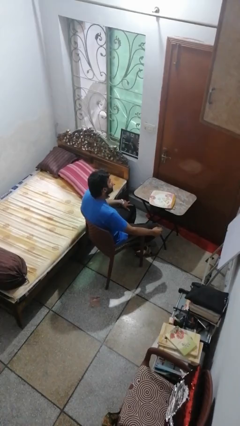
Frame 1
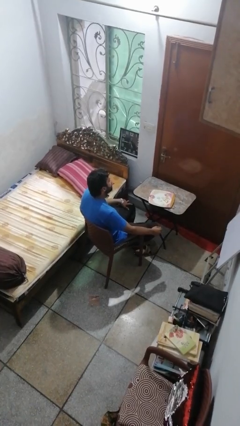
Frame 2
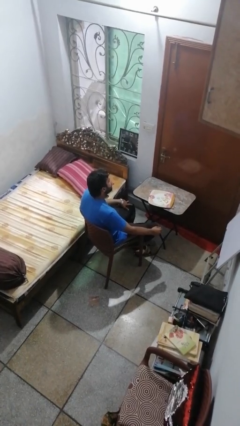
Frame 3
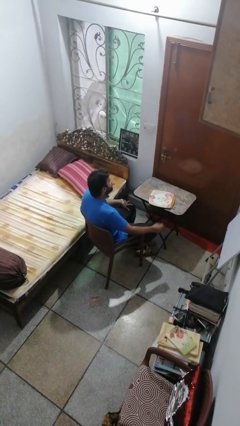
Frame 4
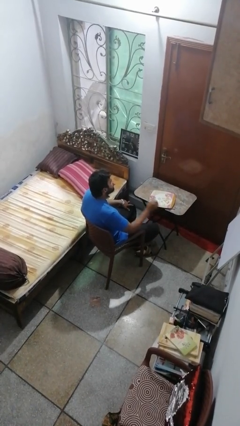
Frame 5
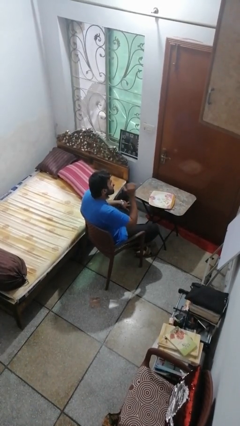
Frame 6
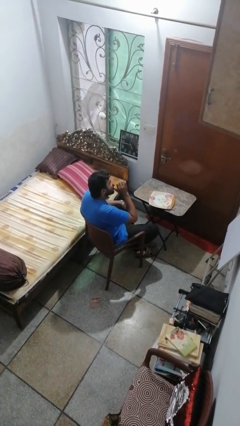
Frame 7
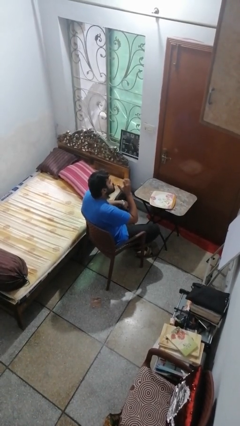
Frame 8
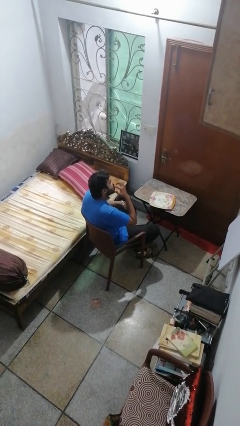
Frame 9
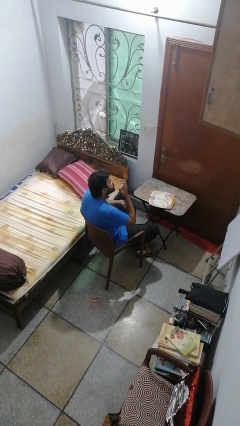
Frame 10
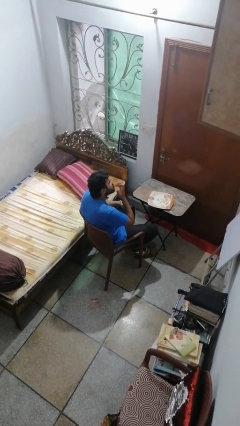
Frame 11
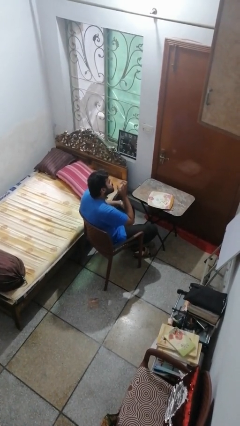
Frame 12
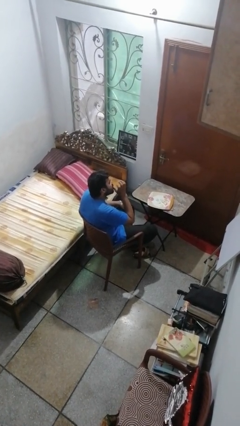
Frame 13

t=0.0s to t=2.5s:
person licks fingers

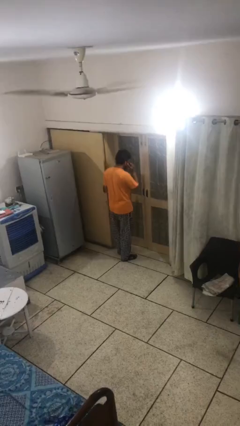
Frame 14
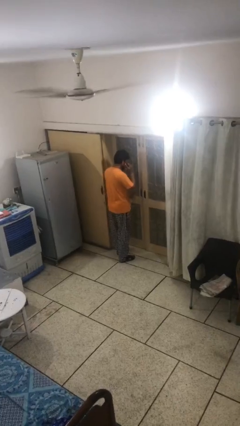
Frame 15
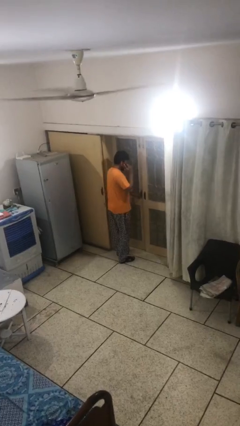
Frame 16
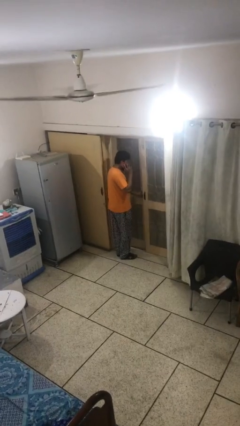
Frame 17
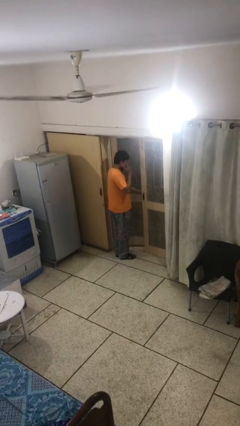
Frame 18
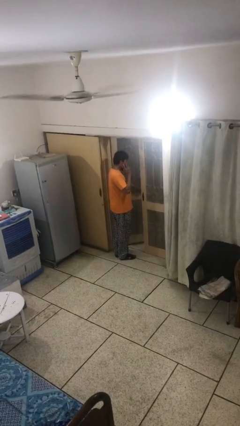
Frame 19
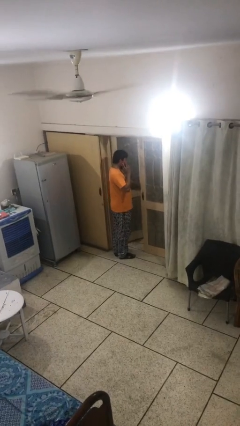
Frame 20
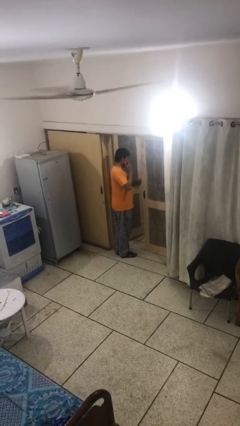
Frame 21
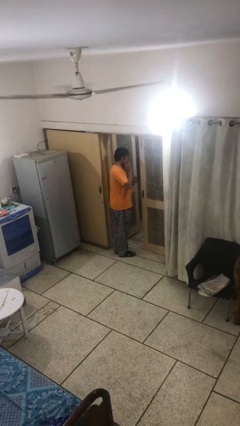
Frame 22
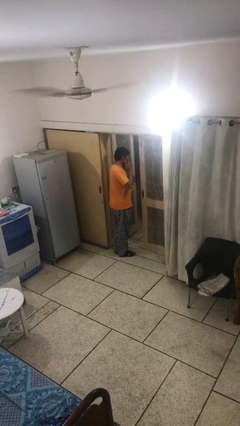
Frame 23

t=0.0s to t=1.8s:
person opens facility door

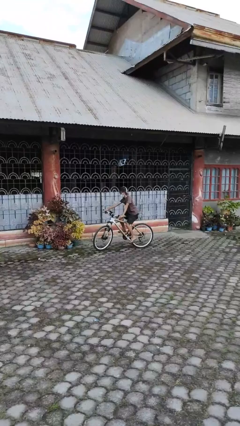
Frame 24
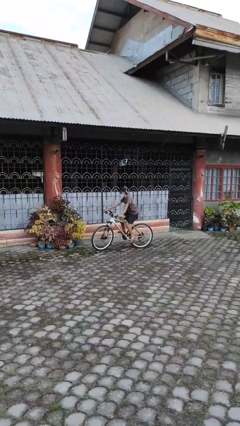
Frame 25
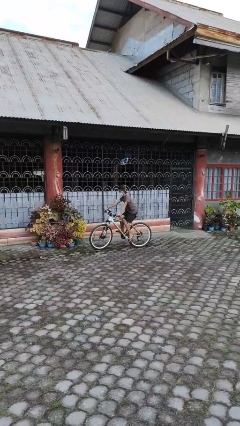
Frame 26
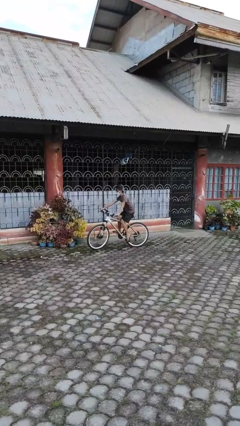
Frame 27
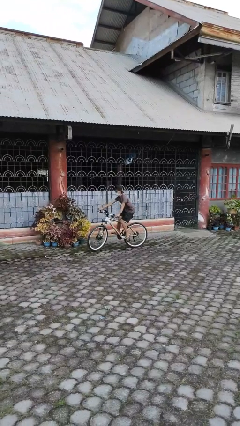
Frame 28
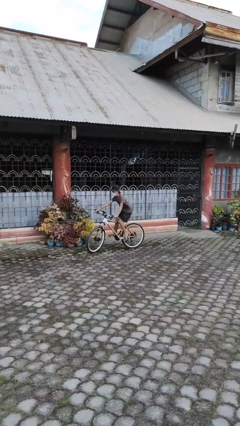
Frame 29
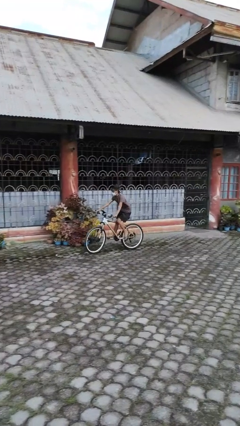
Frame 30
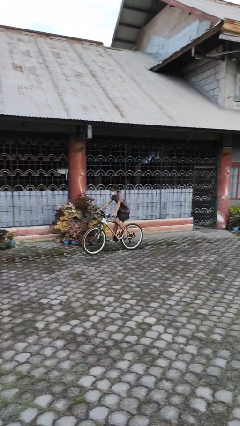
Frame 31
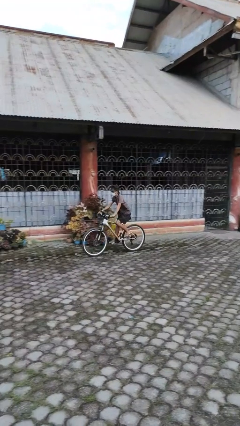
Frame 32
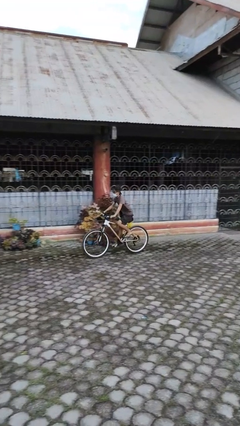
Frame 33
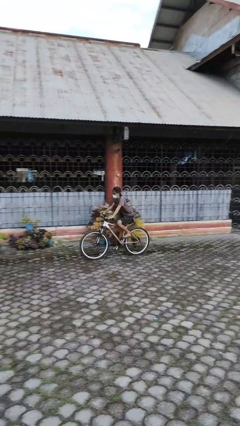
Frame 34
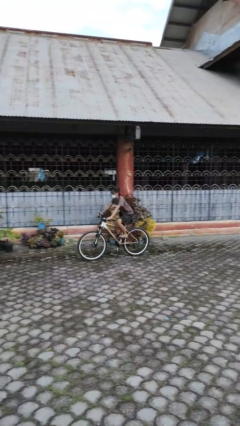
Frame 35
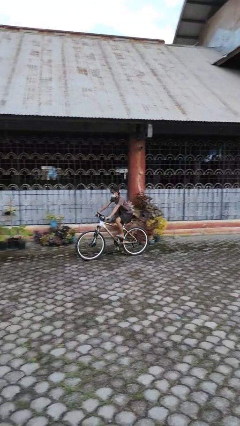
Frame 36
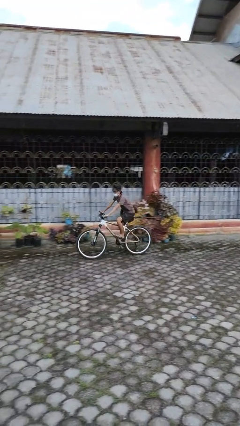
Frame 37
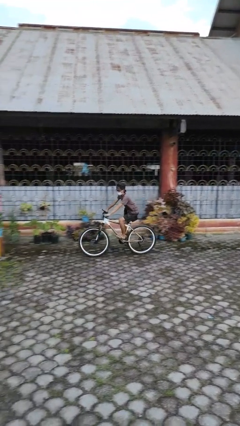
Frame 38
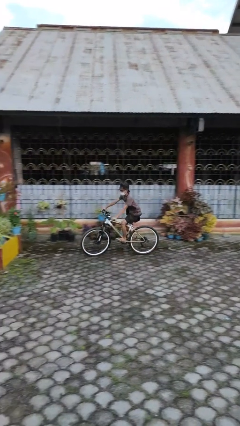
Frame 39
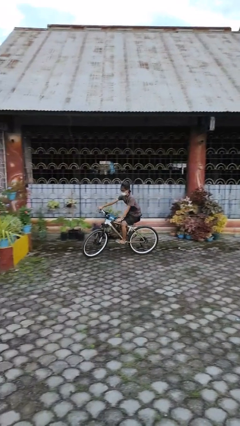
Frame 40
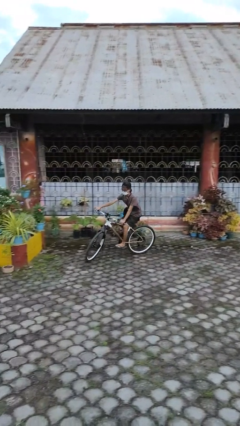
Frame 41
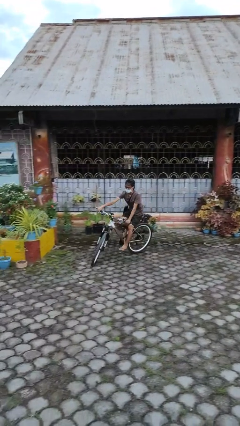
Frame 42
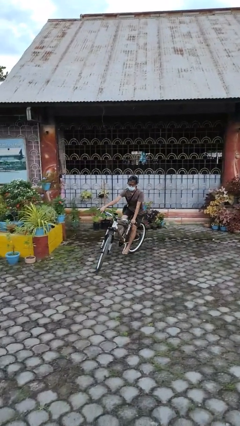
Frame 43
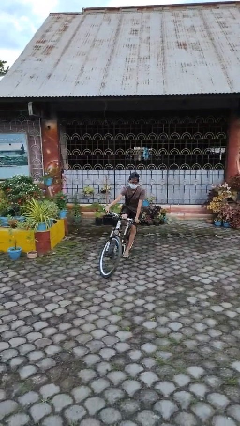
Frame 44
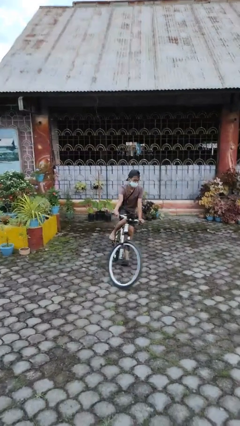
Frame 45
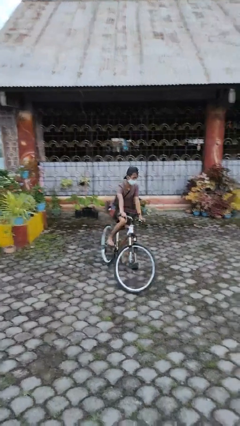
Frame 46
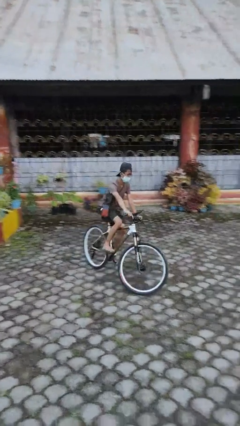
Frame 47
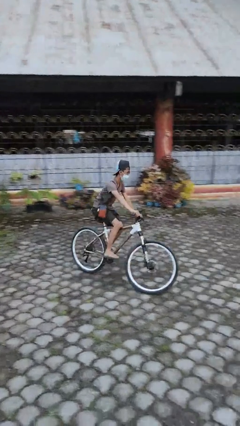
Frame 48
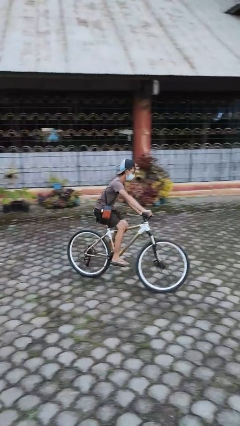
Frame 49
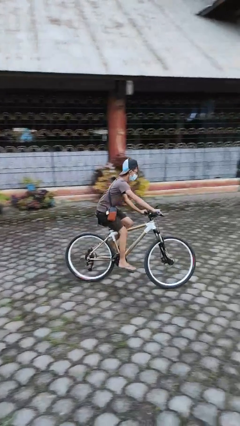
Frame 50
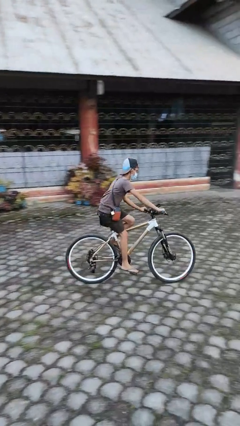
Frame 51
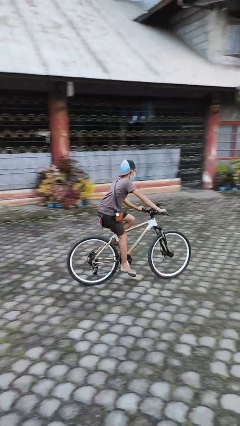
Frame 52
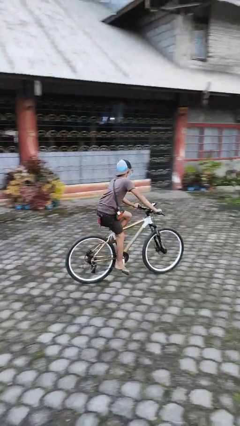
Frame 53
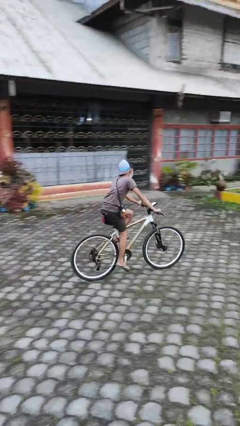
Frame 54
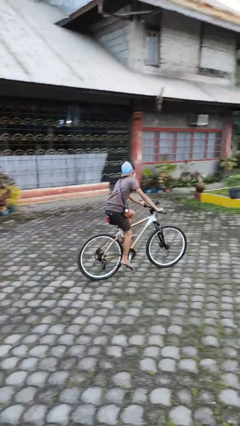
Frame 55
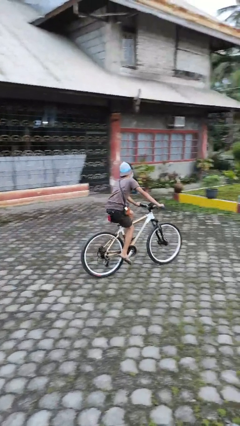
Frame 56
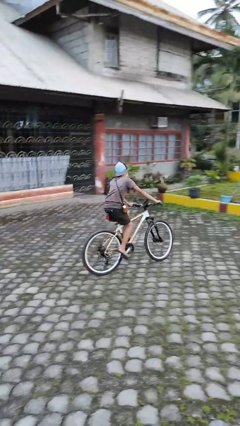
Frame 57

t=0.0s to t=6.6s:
person rides bicycle

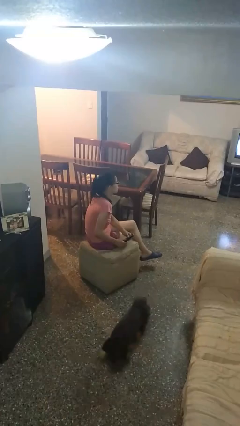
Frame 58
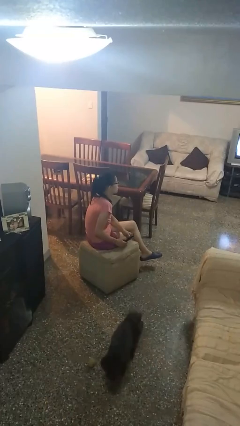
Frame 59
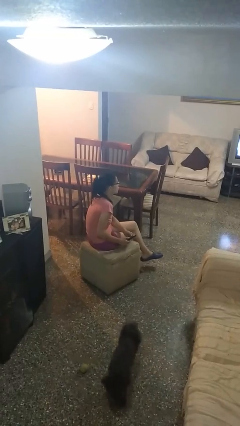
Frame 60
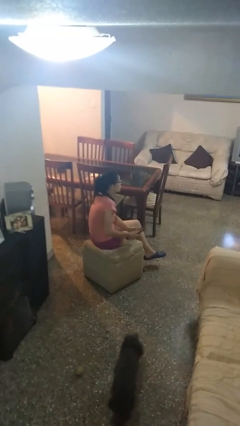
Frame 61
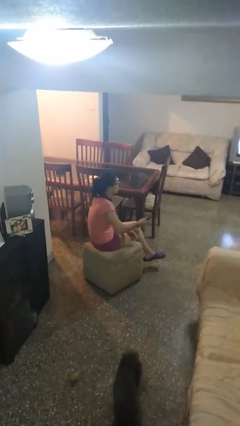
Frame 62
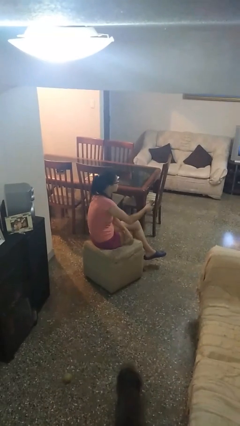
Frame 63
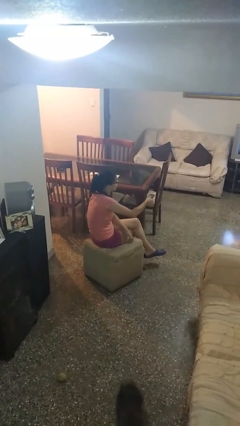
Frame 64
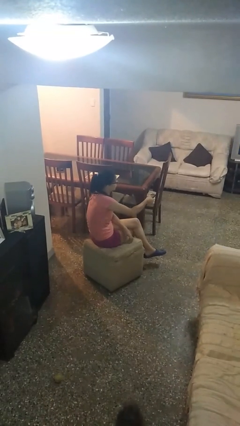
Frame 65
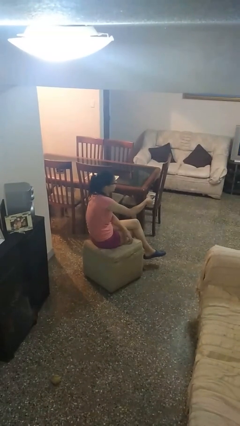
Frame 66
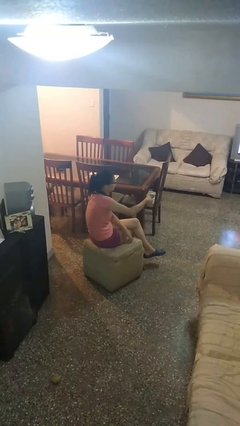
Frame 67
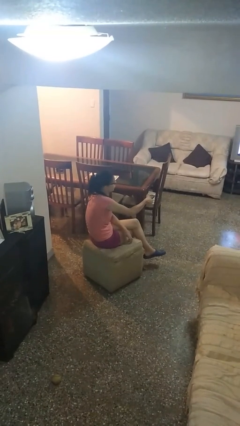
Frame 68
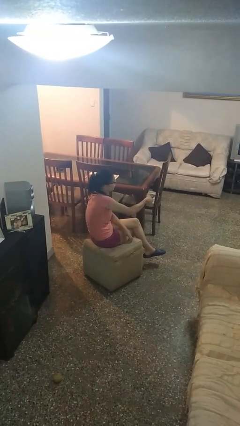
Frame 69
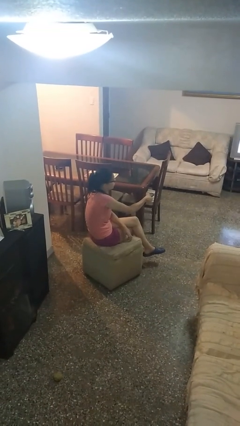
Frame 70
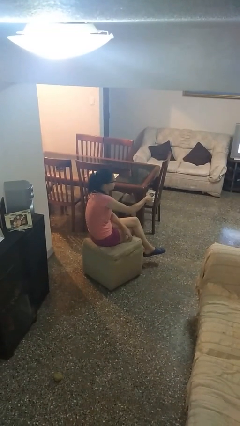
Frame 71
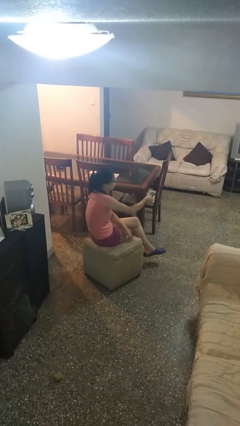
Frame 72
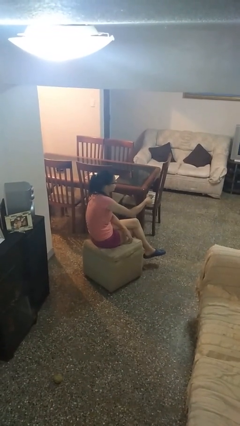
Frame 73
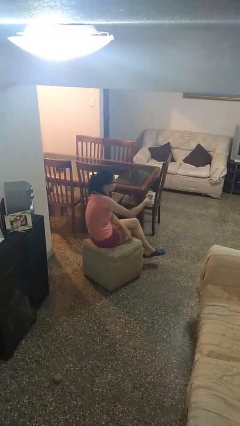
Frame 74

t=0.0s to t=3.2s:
person uses television remote

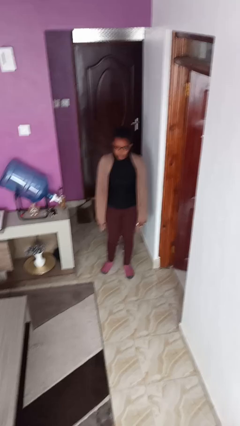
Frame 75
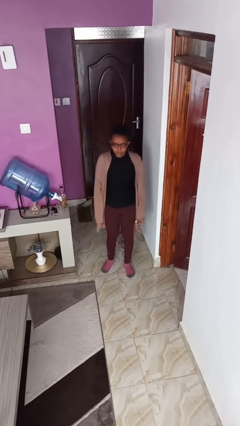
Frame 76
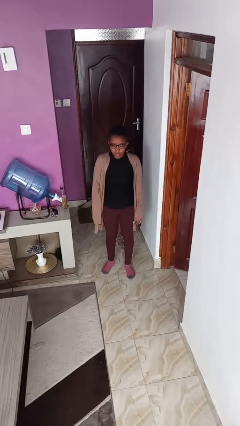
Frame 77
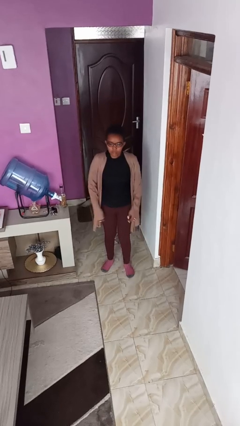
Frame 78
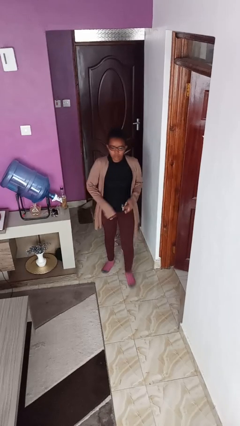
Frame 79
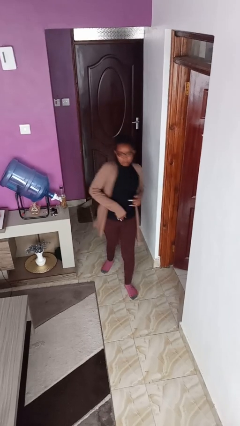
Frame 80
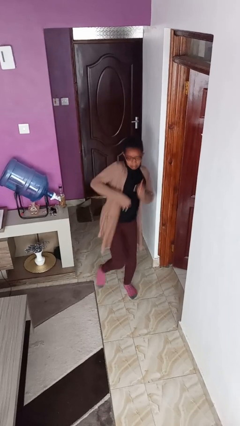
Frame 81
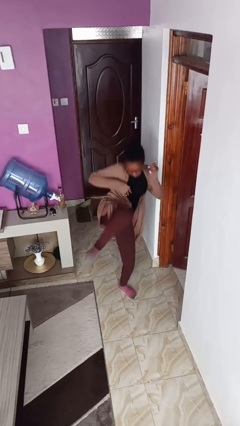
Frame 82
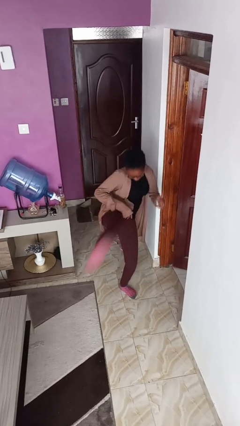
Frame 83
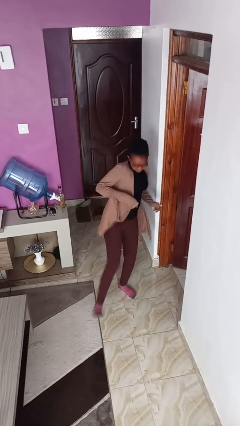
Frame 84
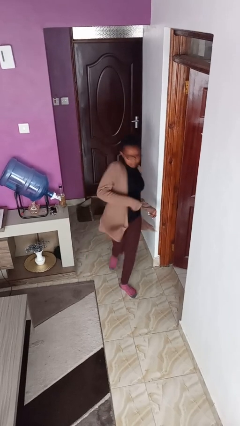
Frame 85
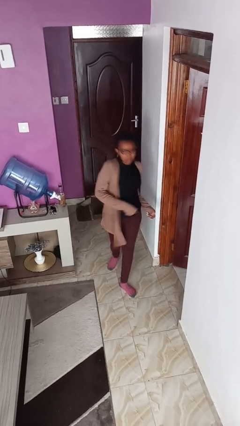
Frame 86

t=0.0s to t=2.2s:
person karate kicks

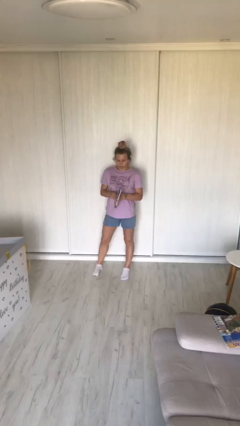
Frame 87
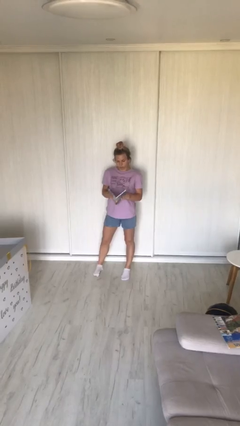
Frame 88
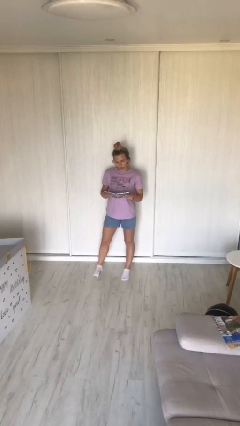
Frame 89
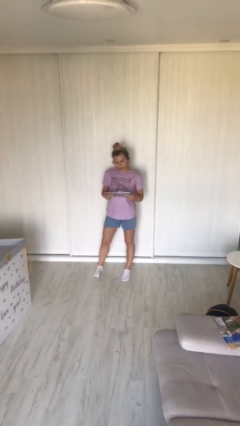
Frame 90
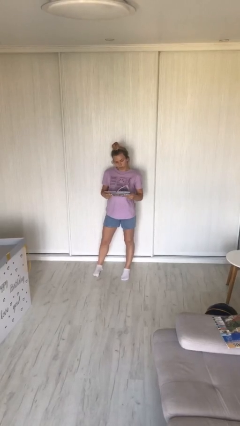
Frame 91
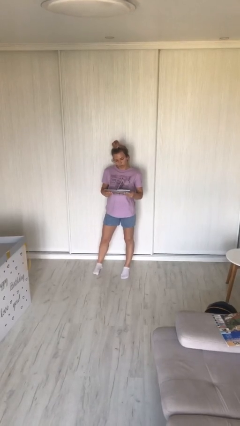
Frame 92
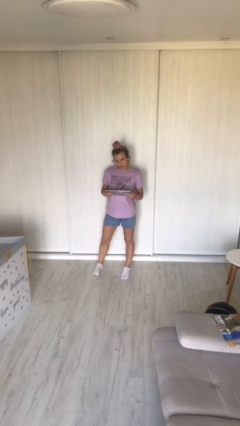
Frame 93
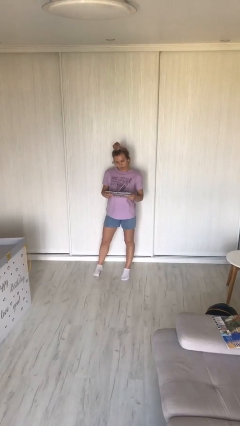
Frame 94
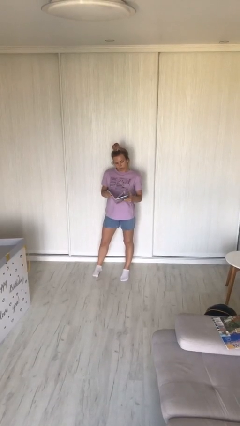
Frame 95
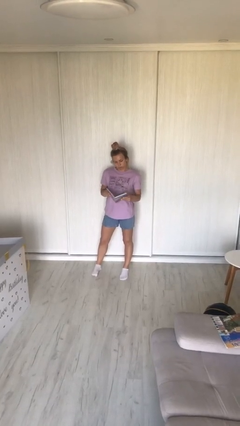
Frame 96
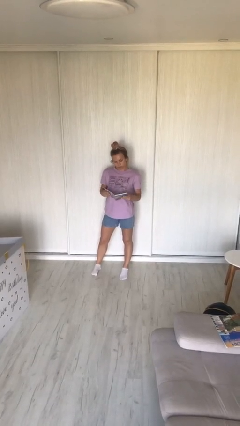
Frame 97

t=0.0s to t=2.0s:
person reads book
